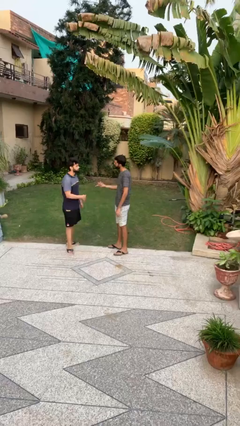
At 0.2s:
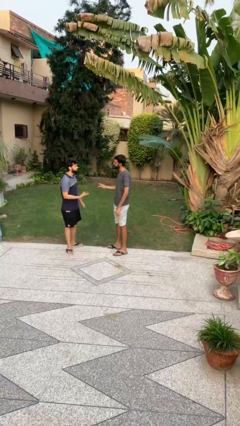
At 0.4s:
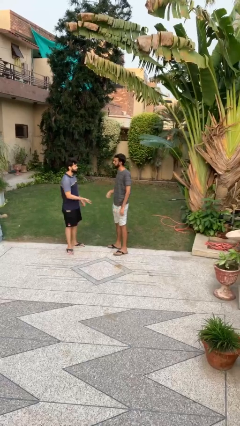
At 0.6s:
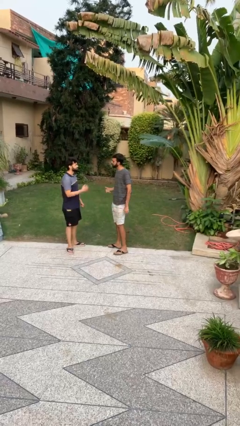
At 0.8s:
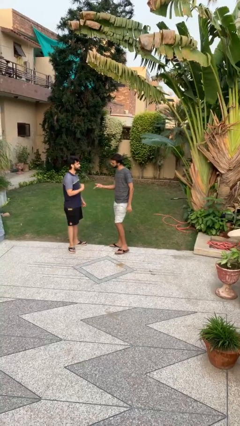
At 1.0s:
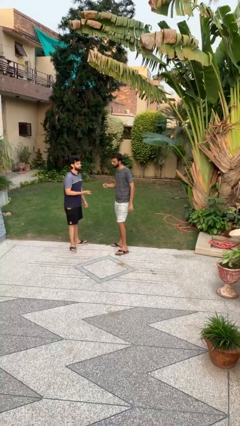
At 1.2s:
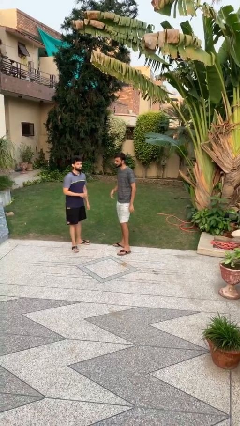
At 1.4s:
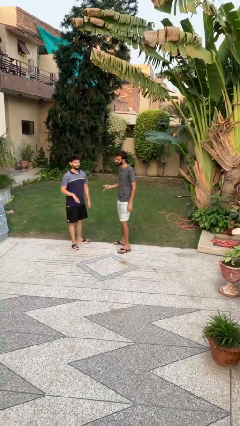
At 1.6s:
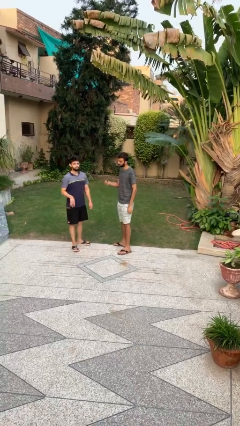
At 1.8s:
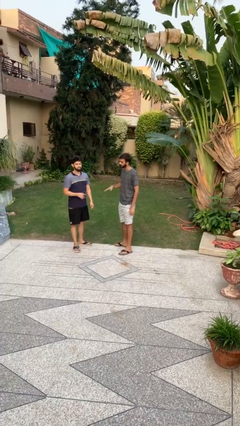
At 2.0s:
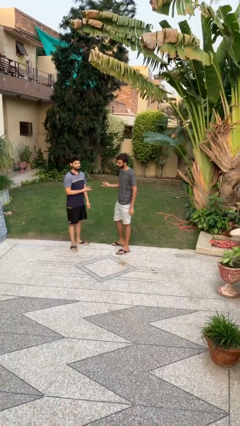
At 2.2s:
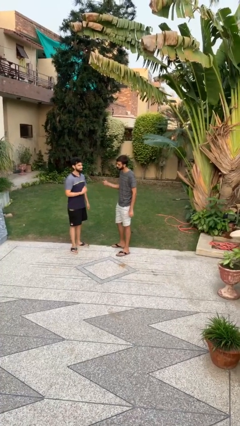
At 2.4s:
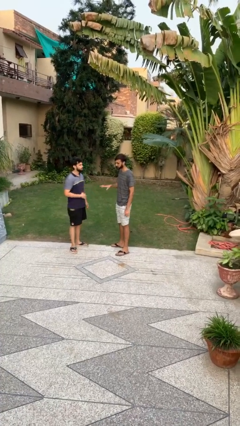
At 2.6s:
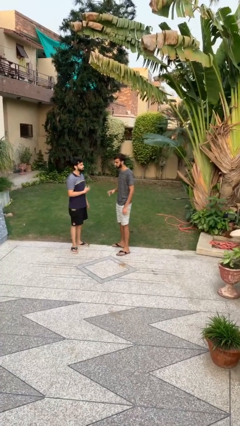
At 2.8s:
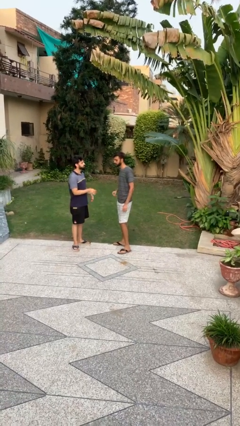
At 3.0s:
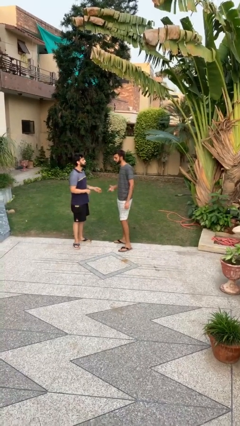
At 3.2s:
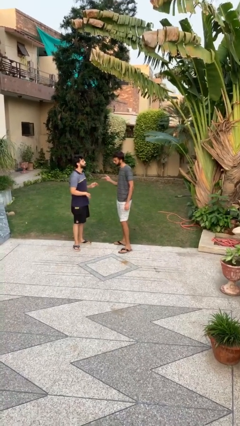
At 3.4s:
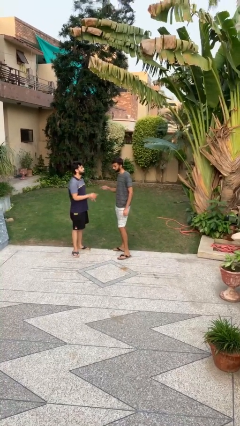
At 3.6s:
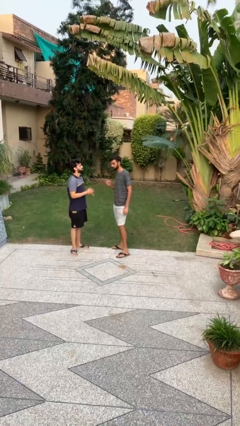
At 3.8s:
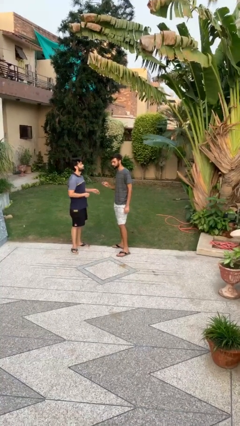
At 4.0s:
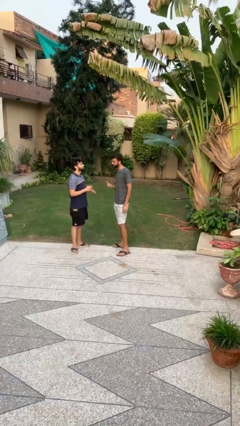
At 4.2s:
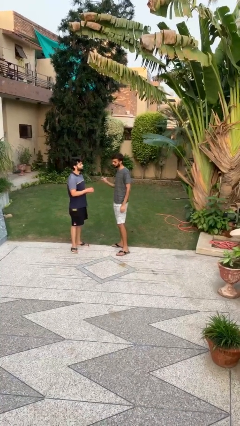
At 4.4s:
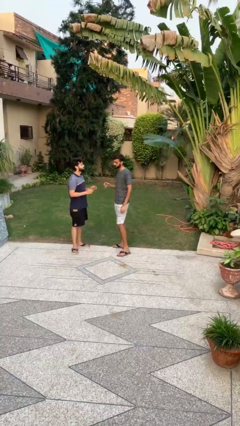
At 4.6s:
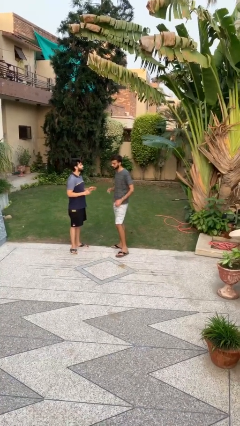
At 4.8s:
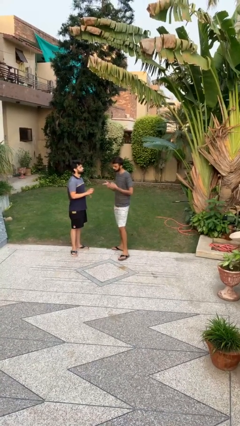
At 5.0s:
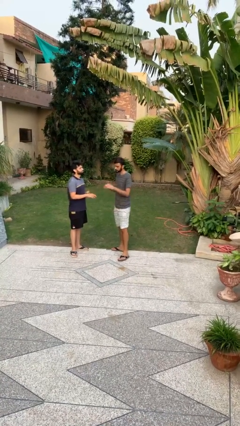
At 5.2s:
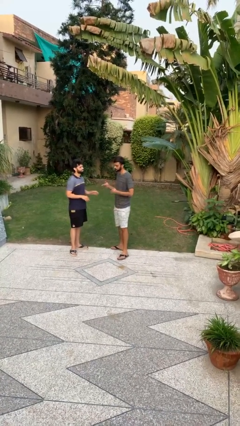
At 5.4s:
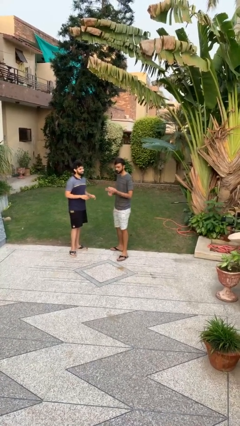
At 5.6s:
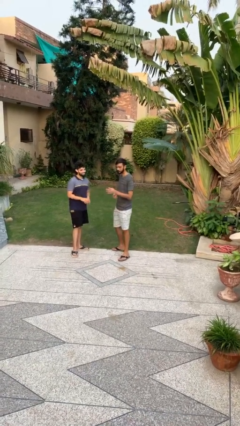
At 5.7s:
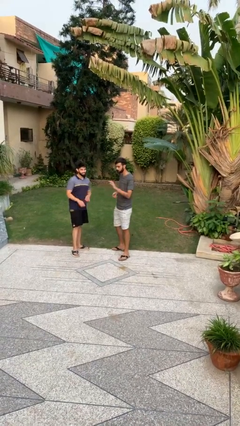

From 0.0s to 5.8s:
person talks to person

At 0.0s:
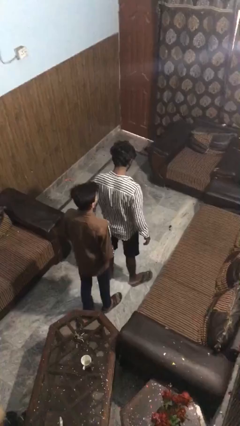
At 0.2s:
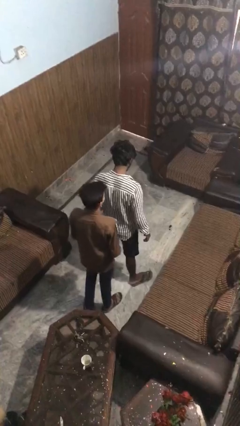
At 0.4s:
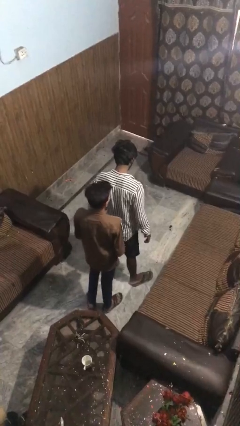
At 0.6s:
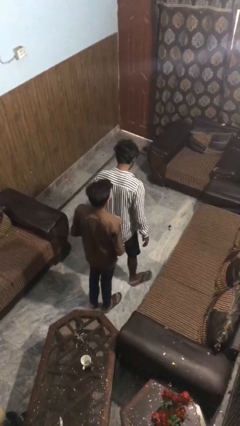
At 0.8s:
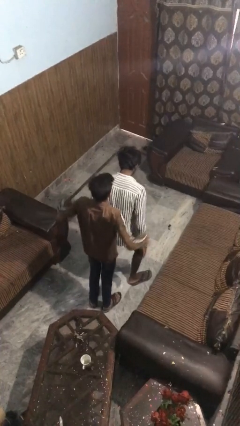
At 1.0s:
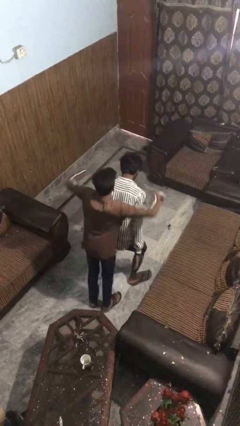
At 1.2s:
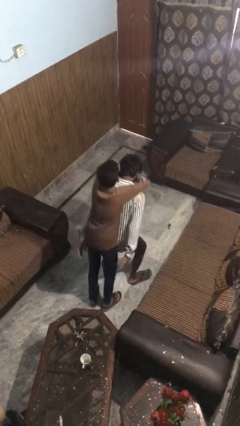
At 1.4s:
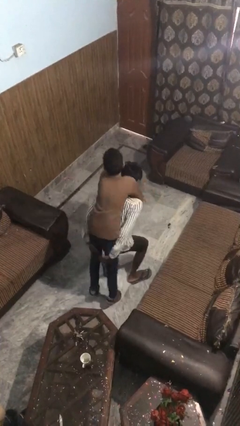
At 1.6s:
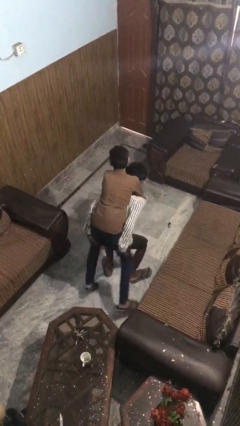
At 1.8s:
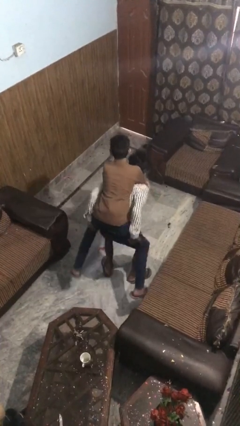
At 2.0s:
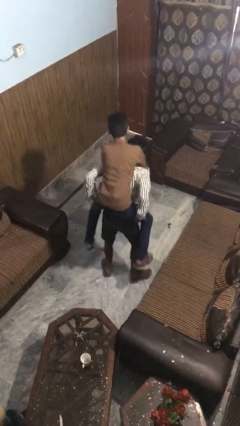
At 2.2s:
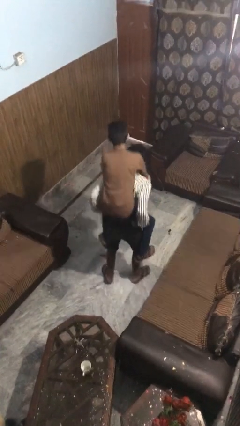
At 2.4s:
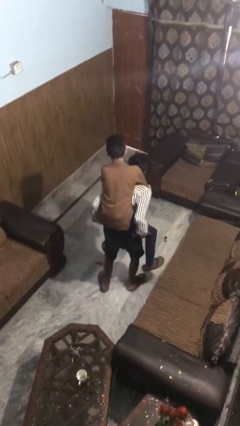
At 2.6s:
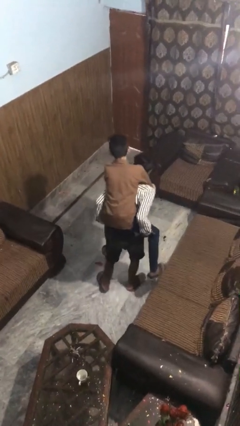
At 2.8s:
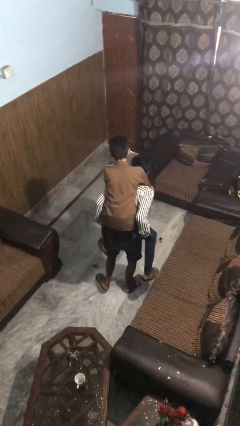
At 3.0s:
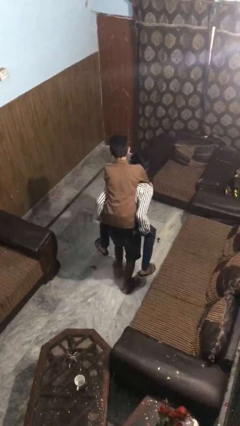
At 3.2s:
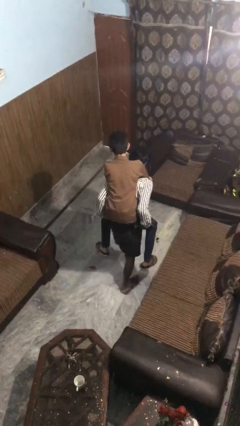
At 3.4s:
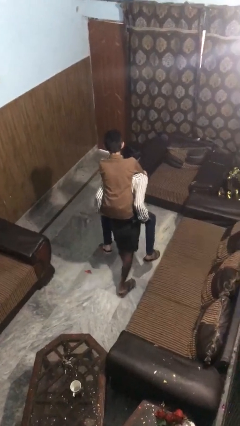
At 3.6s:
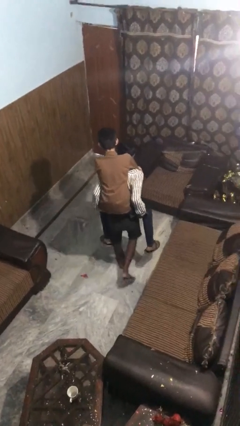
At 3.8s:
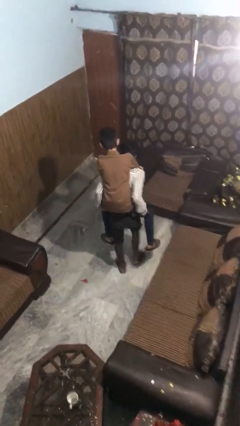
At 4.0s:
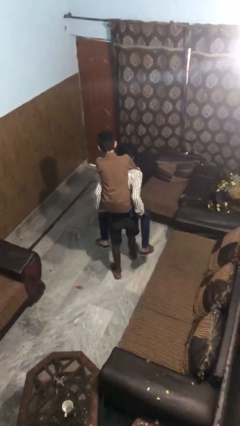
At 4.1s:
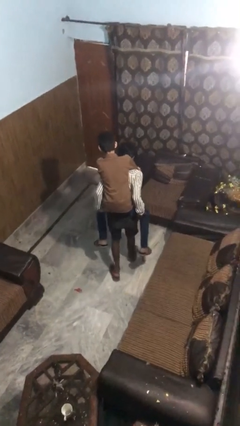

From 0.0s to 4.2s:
person carries person on back

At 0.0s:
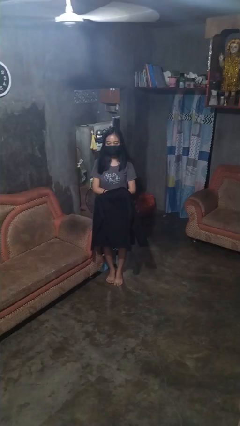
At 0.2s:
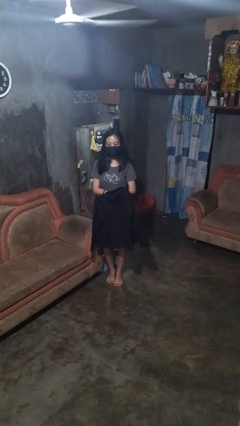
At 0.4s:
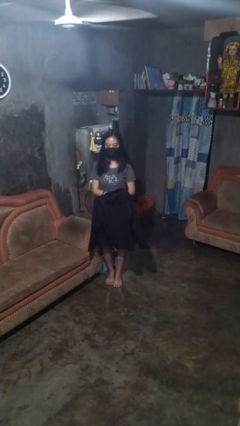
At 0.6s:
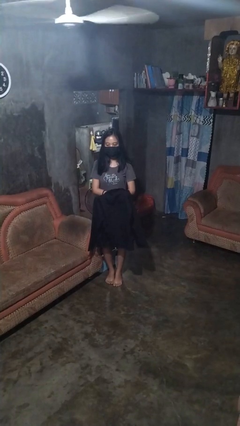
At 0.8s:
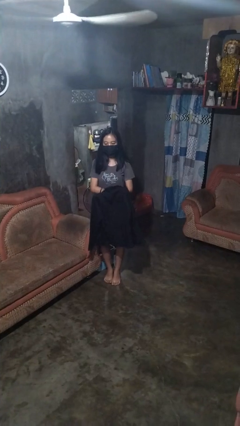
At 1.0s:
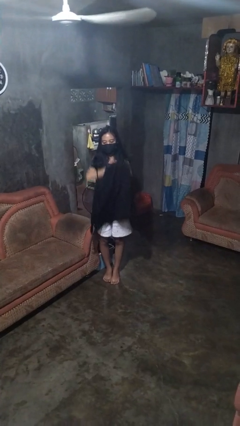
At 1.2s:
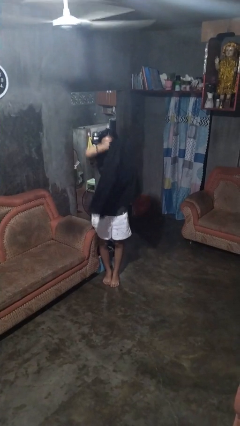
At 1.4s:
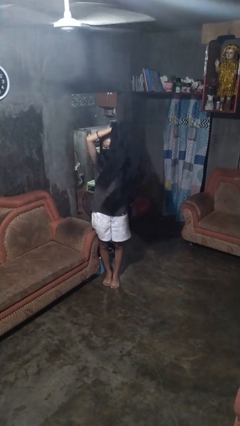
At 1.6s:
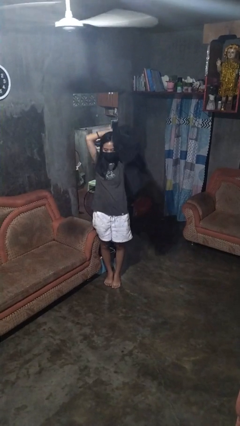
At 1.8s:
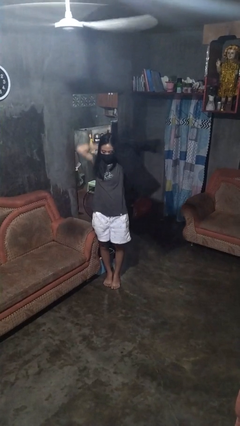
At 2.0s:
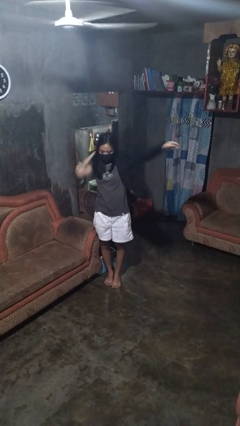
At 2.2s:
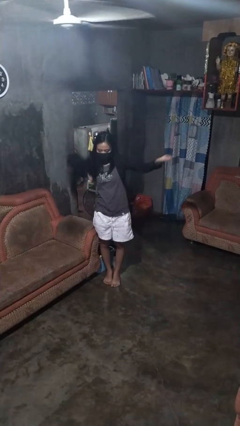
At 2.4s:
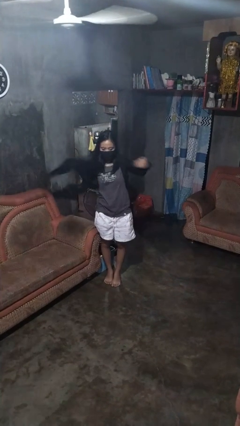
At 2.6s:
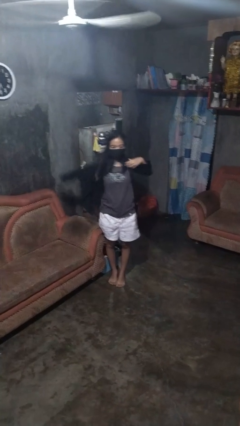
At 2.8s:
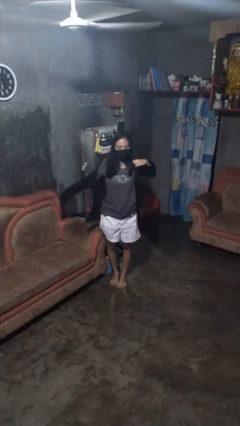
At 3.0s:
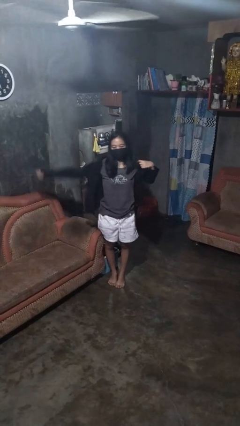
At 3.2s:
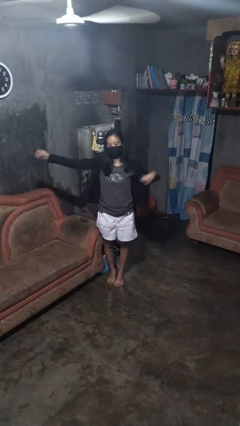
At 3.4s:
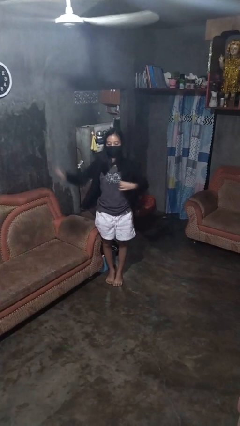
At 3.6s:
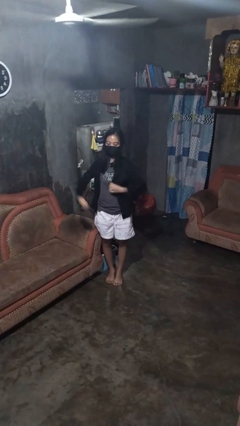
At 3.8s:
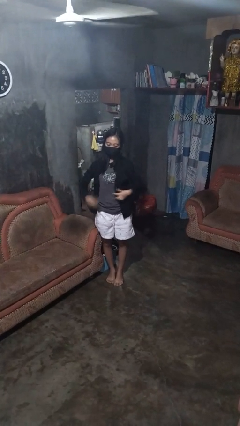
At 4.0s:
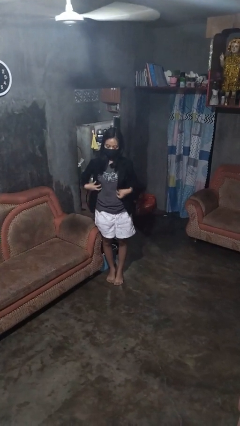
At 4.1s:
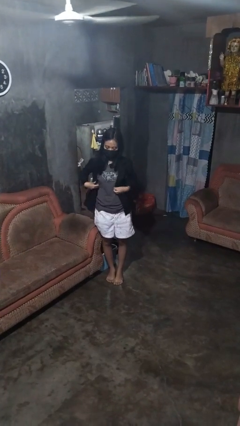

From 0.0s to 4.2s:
person puts on shirt

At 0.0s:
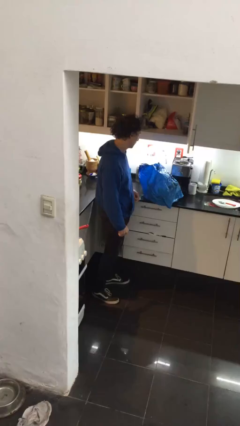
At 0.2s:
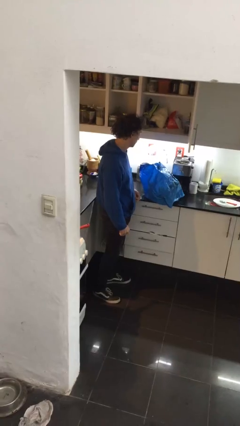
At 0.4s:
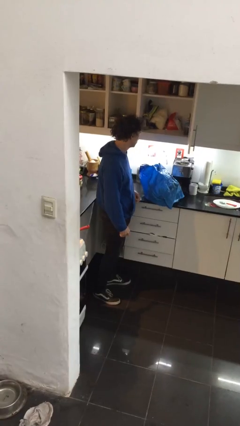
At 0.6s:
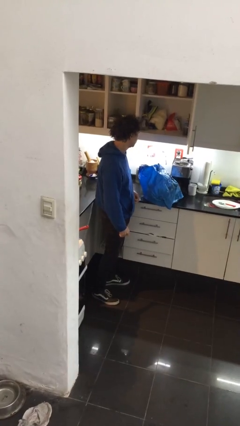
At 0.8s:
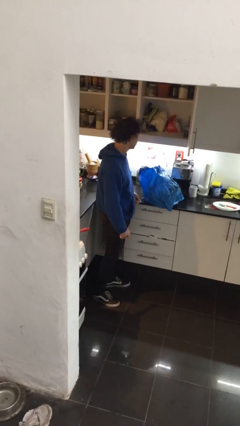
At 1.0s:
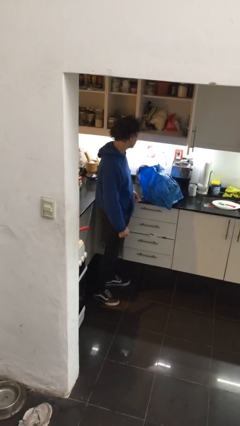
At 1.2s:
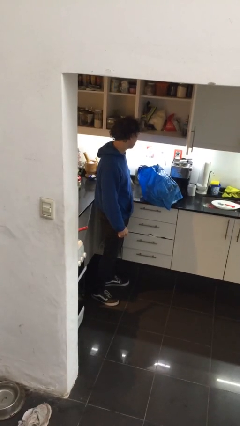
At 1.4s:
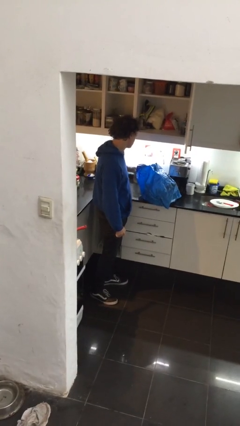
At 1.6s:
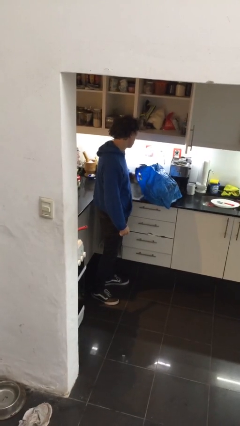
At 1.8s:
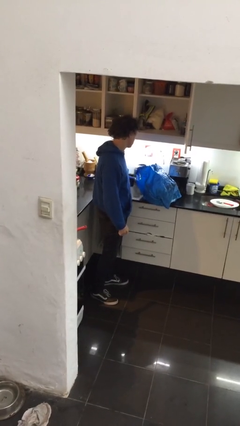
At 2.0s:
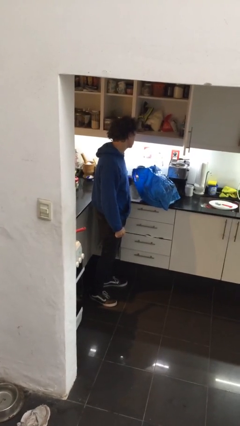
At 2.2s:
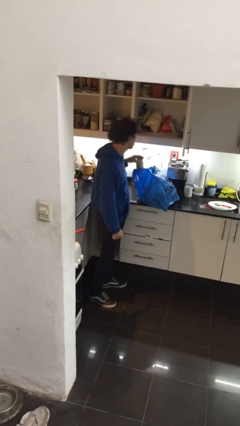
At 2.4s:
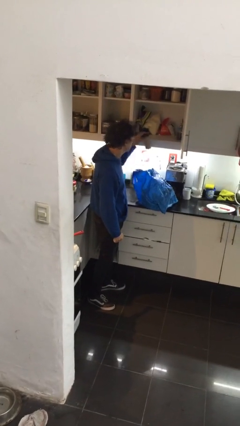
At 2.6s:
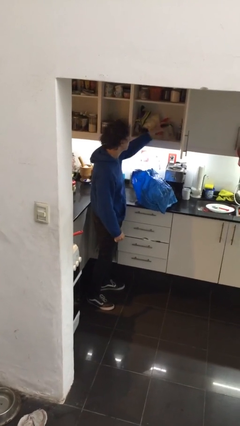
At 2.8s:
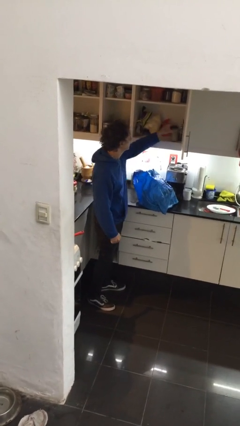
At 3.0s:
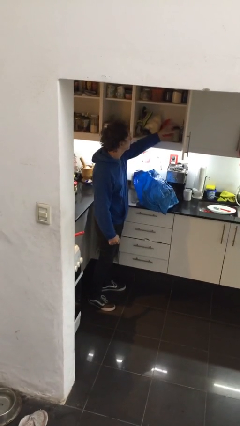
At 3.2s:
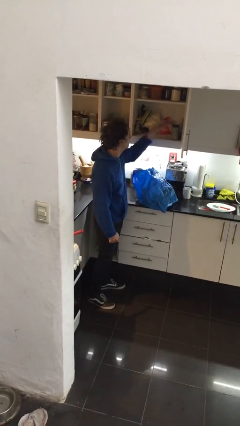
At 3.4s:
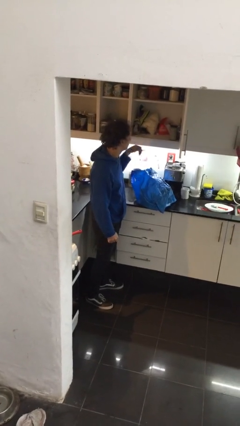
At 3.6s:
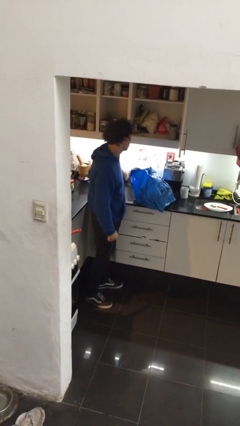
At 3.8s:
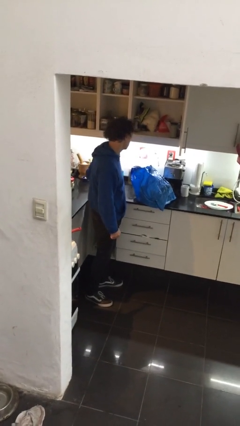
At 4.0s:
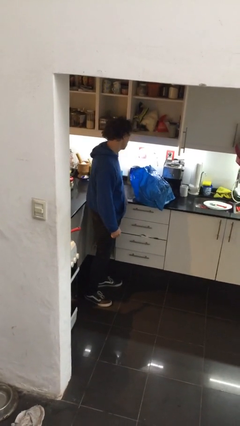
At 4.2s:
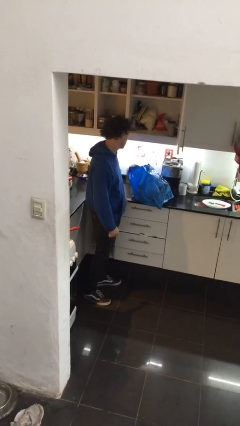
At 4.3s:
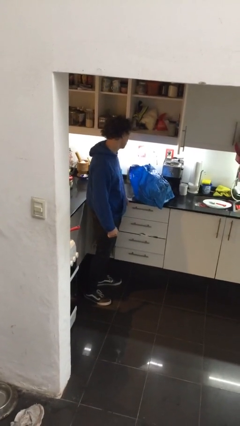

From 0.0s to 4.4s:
person loads groceries into cabinet
